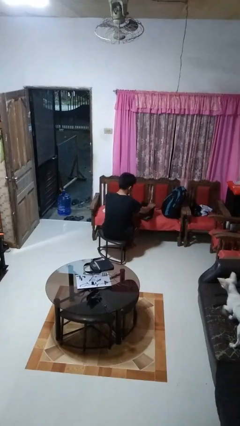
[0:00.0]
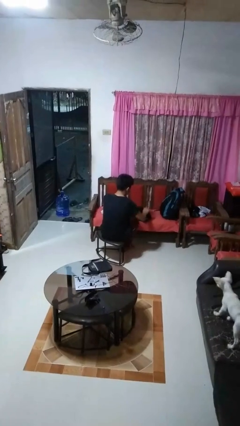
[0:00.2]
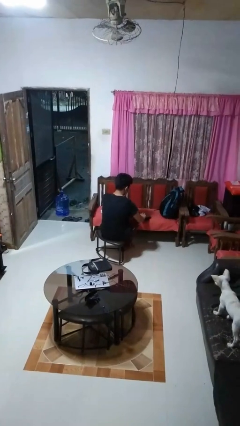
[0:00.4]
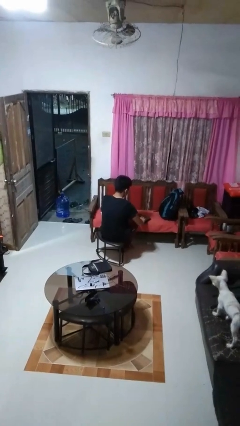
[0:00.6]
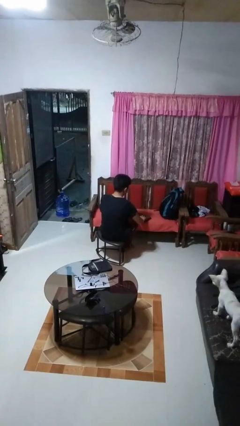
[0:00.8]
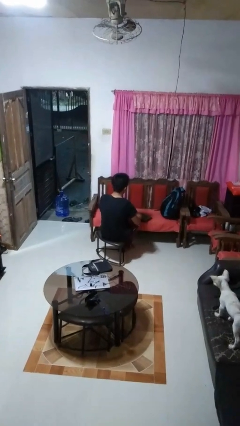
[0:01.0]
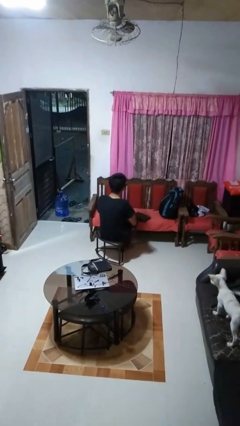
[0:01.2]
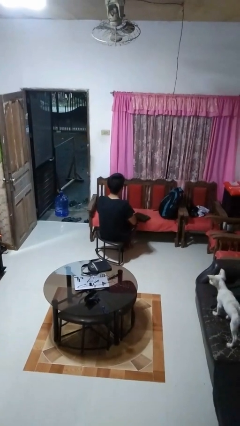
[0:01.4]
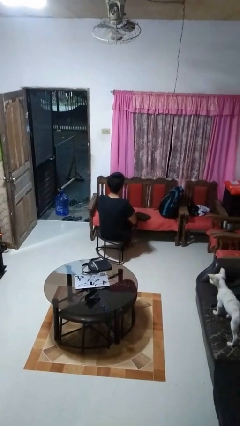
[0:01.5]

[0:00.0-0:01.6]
person closes laptop

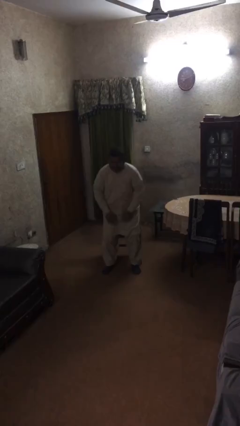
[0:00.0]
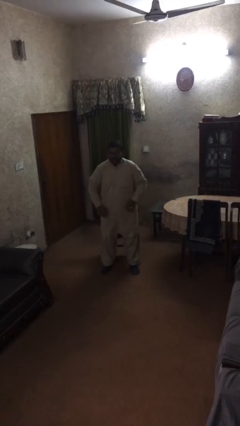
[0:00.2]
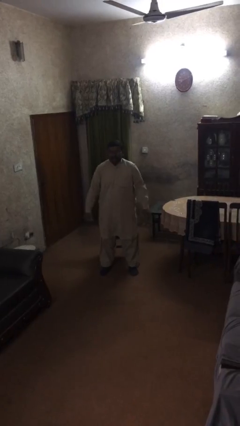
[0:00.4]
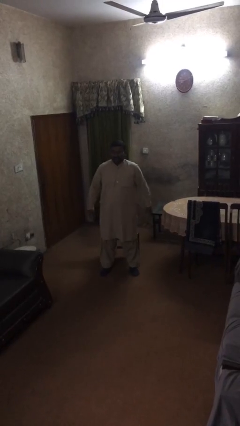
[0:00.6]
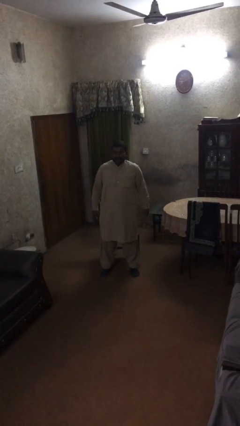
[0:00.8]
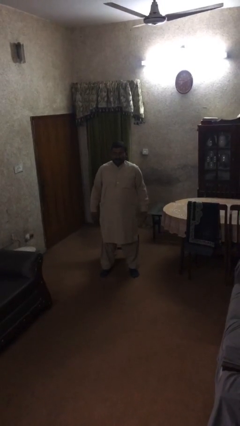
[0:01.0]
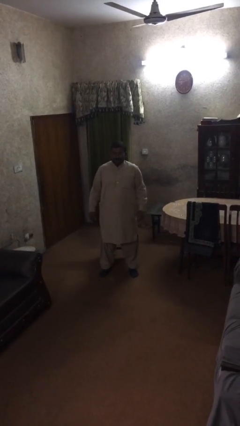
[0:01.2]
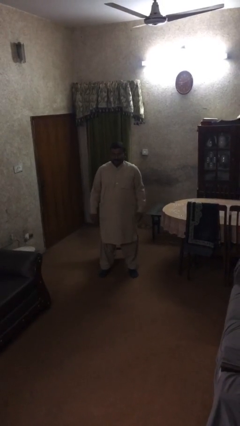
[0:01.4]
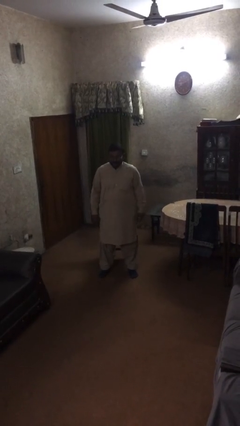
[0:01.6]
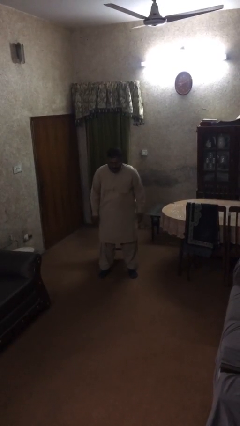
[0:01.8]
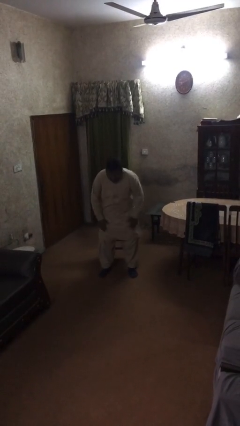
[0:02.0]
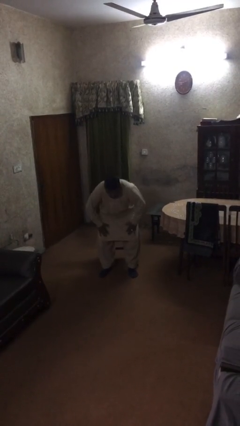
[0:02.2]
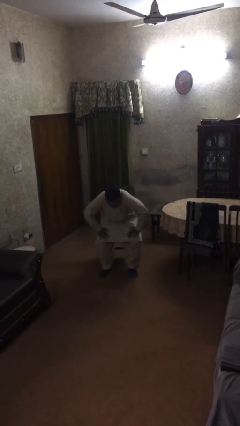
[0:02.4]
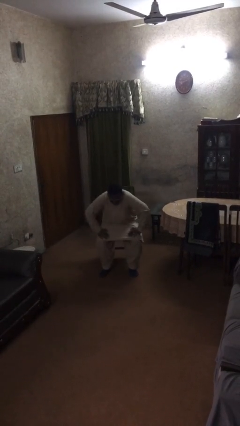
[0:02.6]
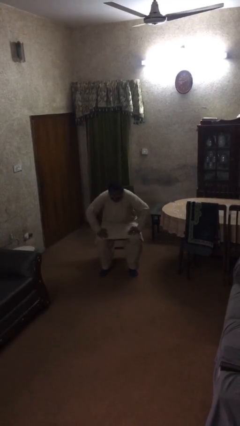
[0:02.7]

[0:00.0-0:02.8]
person stands up

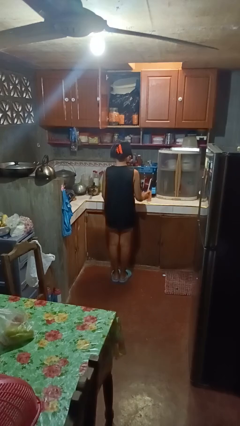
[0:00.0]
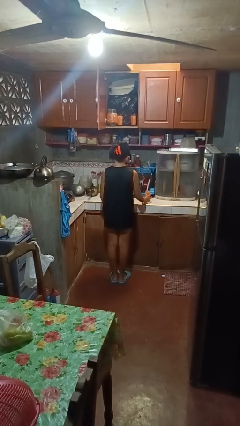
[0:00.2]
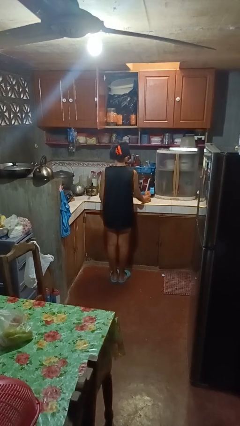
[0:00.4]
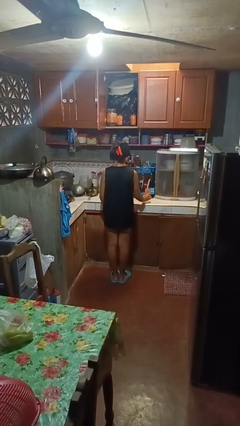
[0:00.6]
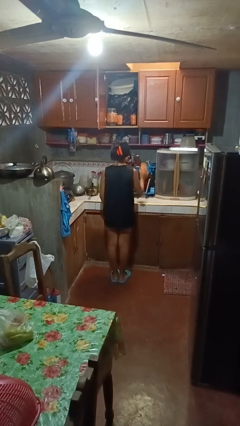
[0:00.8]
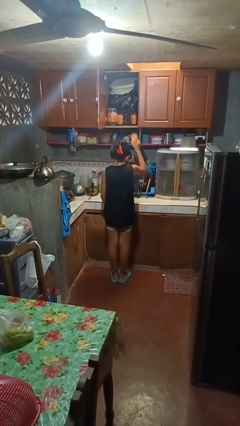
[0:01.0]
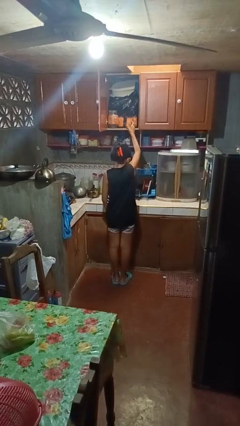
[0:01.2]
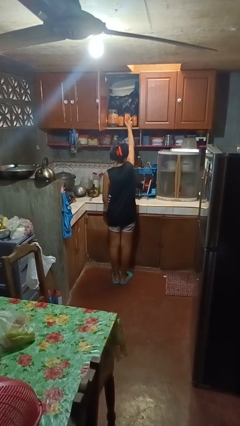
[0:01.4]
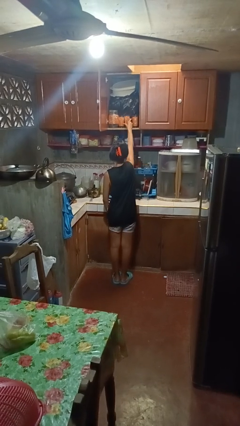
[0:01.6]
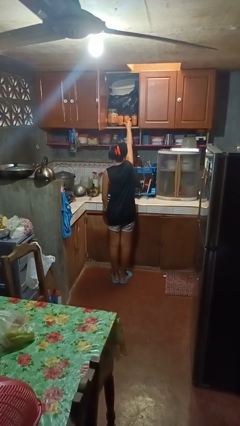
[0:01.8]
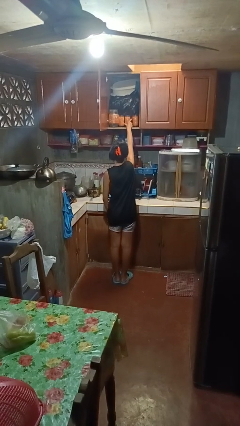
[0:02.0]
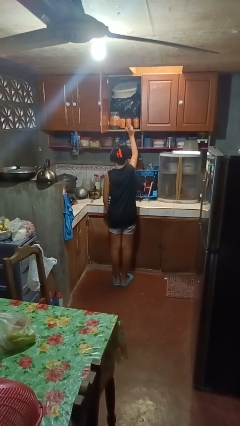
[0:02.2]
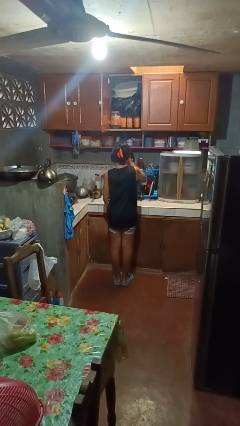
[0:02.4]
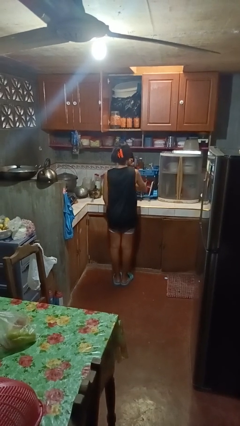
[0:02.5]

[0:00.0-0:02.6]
person puts object in cabinet

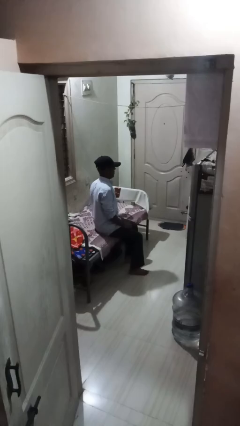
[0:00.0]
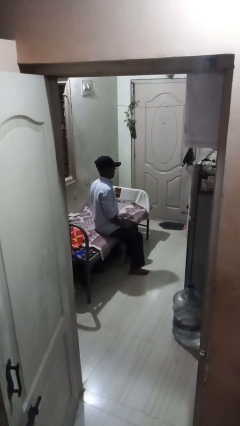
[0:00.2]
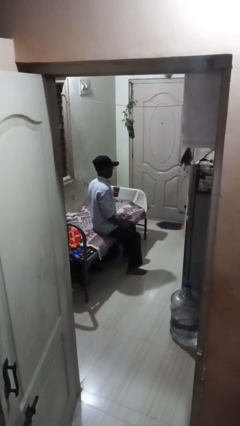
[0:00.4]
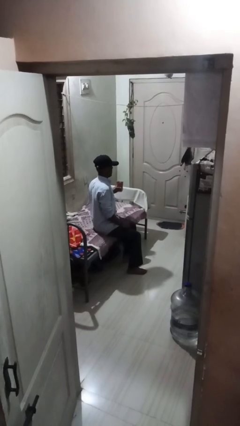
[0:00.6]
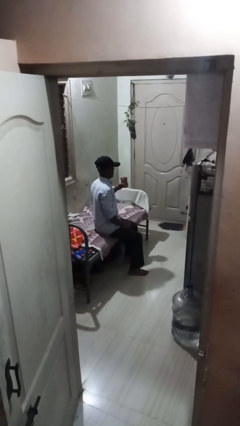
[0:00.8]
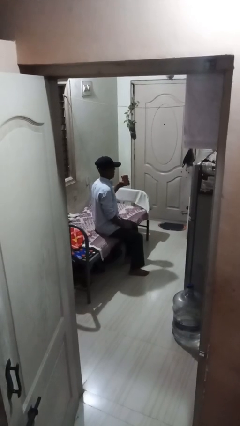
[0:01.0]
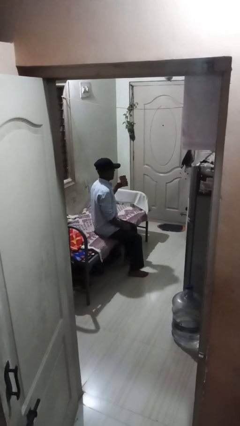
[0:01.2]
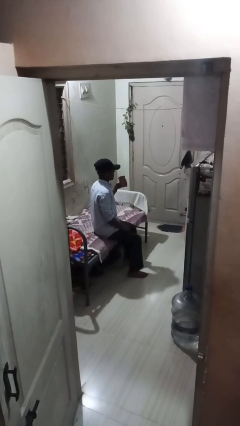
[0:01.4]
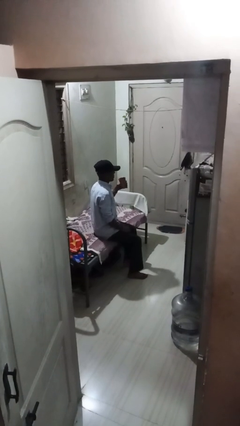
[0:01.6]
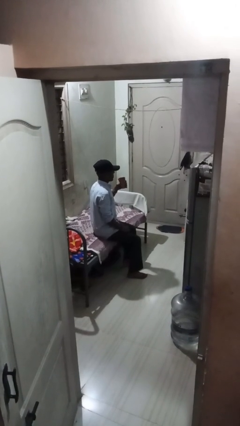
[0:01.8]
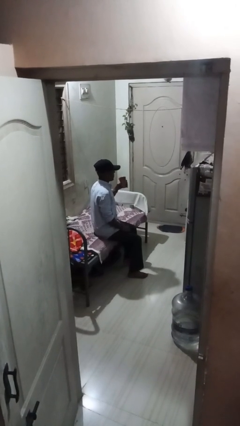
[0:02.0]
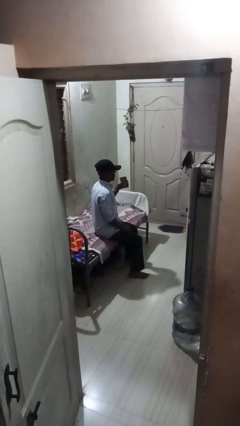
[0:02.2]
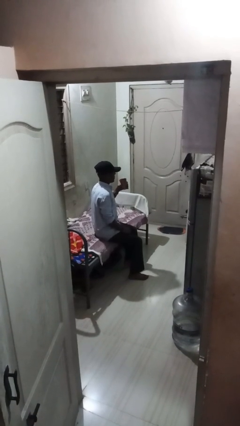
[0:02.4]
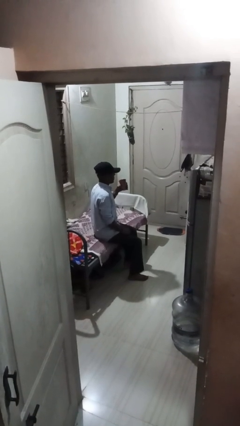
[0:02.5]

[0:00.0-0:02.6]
person drinks from straw

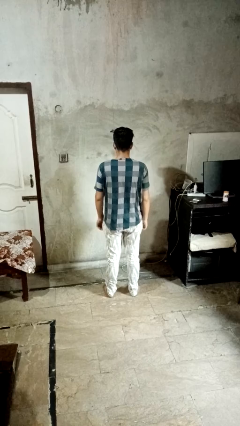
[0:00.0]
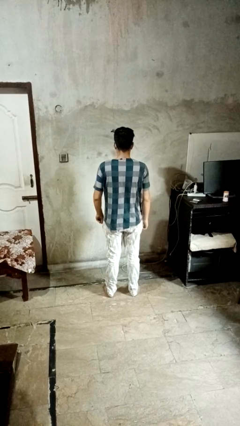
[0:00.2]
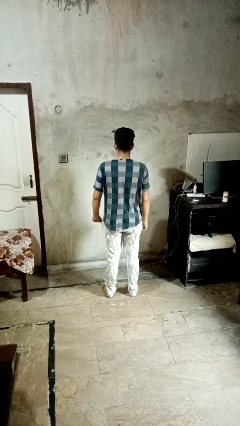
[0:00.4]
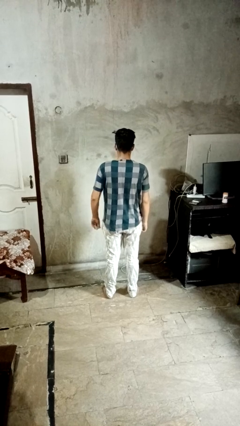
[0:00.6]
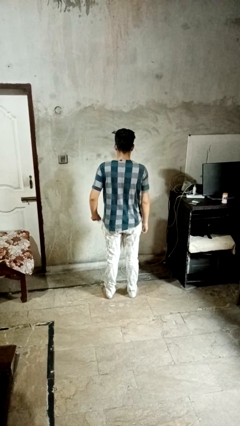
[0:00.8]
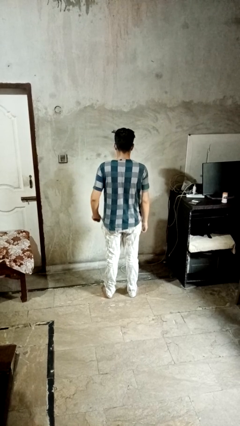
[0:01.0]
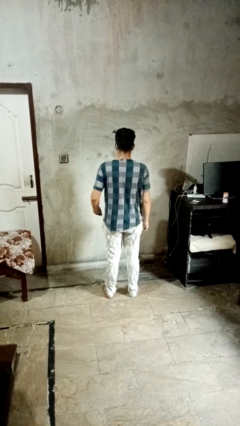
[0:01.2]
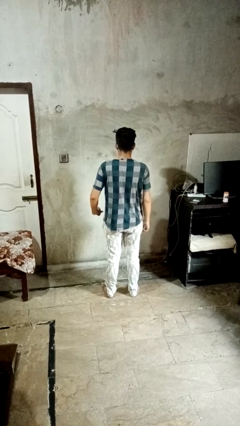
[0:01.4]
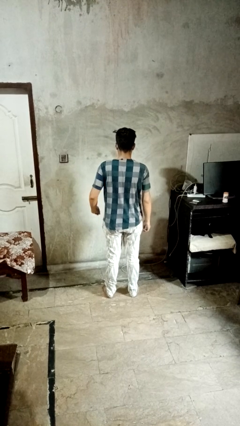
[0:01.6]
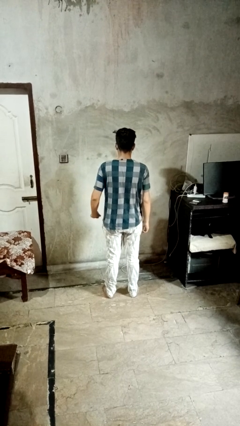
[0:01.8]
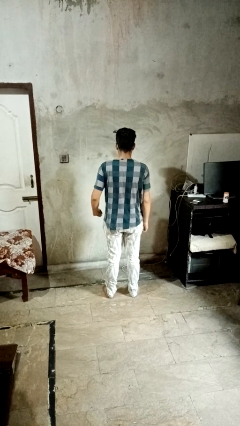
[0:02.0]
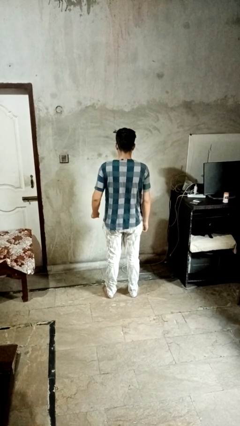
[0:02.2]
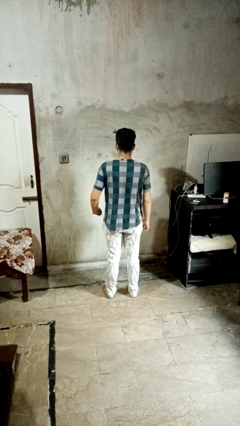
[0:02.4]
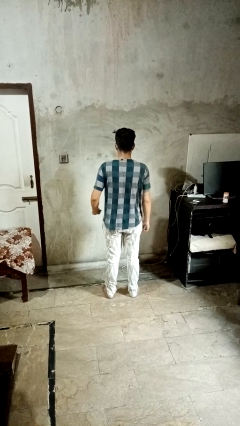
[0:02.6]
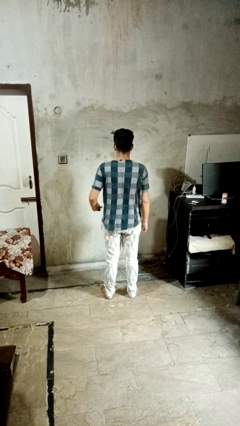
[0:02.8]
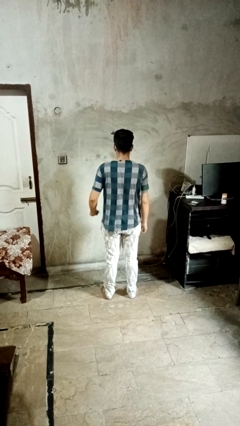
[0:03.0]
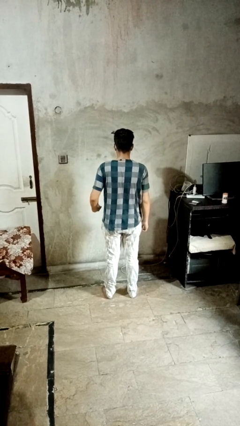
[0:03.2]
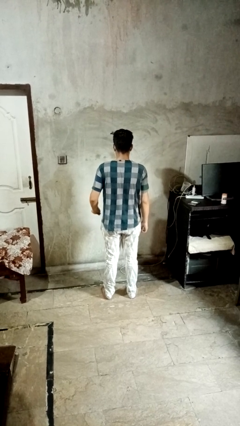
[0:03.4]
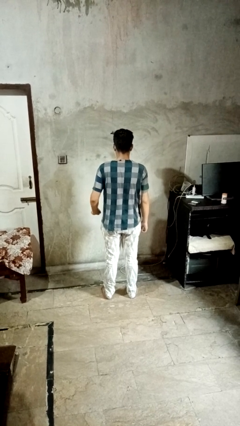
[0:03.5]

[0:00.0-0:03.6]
person snaps fingers

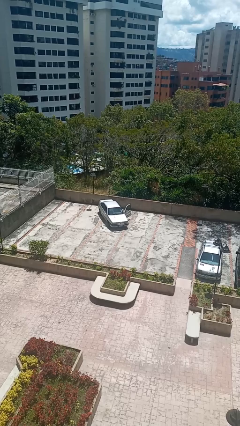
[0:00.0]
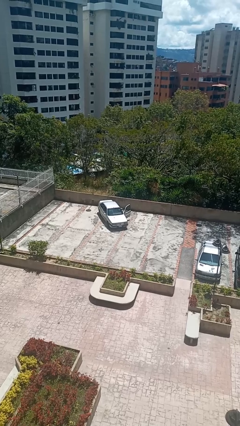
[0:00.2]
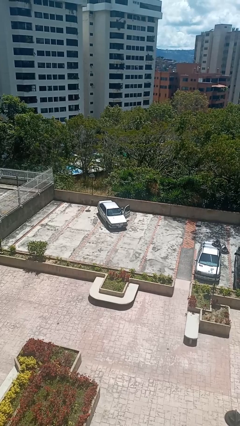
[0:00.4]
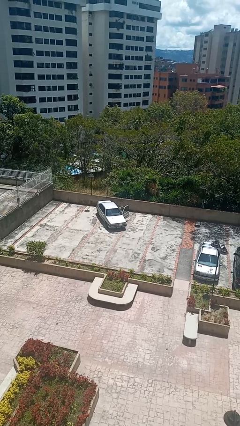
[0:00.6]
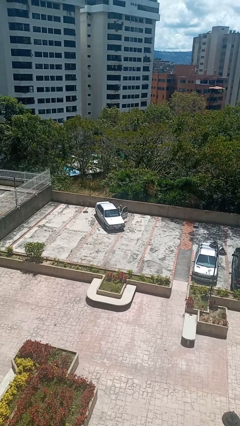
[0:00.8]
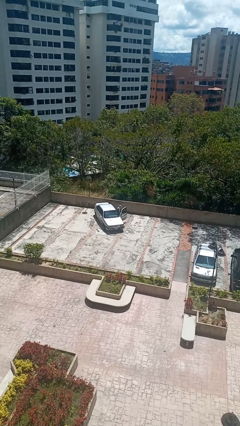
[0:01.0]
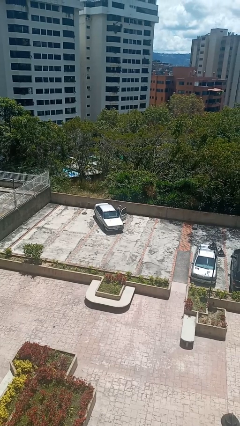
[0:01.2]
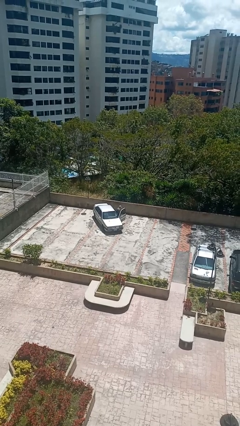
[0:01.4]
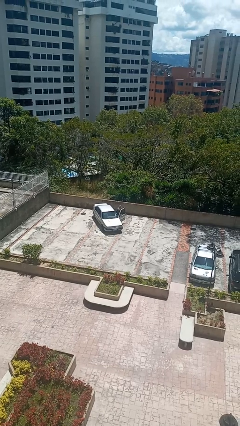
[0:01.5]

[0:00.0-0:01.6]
person exits car

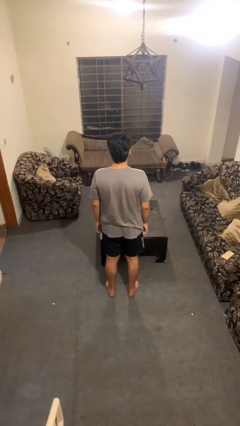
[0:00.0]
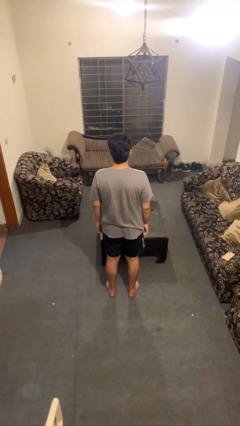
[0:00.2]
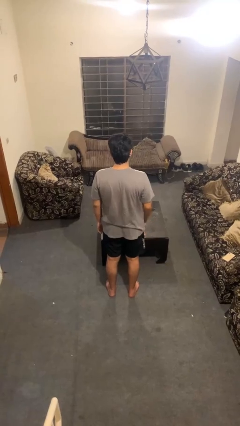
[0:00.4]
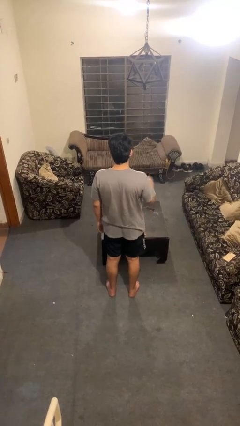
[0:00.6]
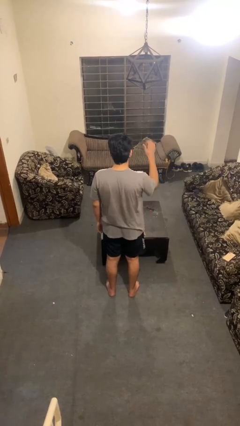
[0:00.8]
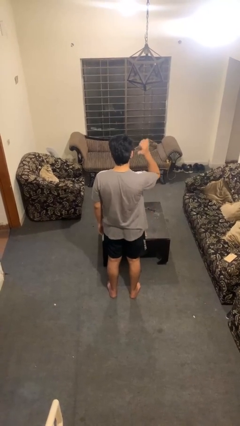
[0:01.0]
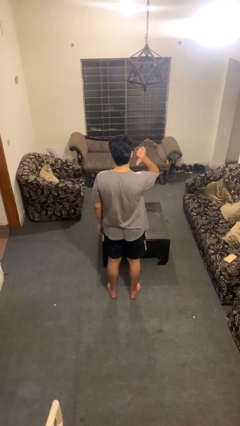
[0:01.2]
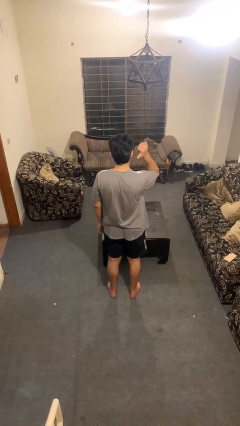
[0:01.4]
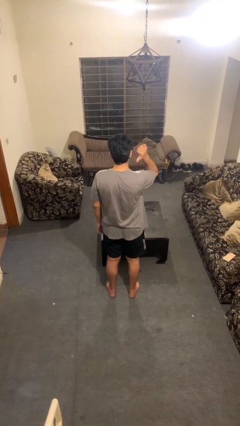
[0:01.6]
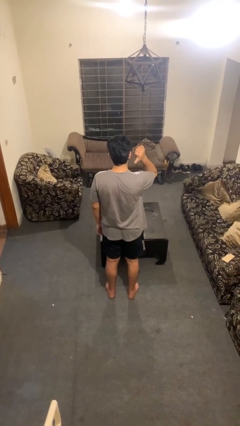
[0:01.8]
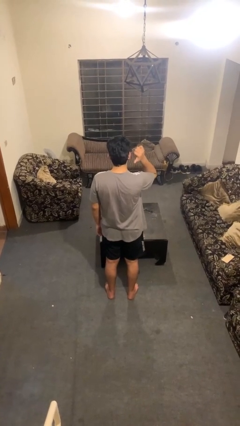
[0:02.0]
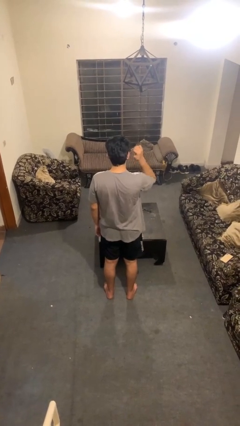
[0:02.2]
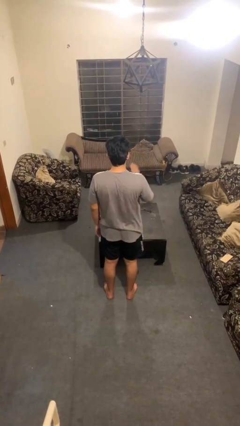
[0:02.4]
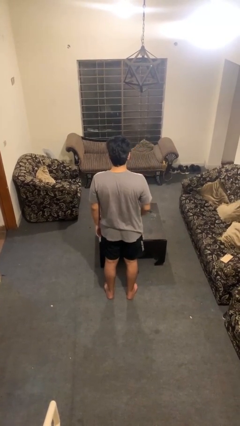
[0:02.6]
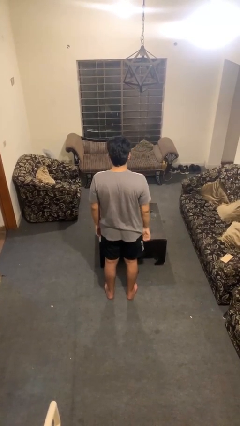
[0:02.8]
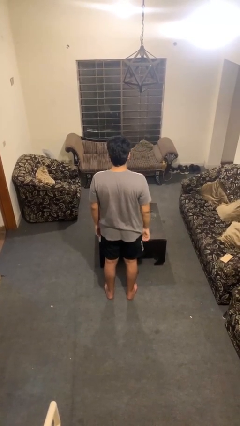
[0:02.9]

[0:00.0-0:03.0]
person gestures behind me
